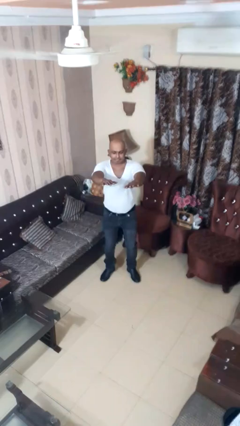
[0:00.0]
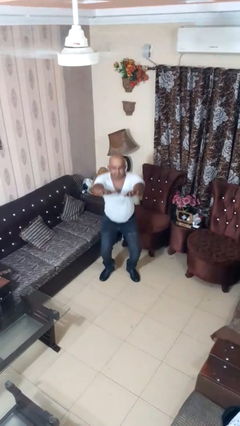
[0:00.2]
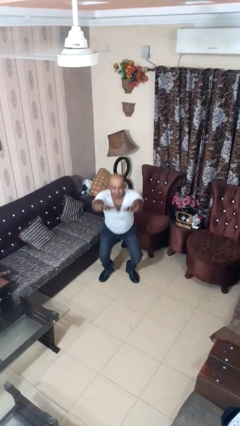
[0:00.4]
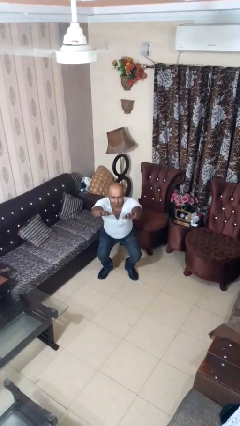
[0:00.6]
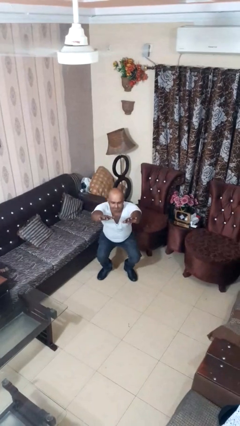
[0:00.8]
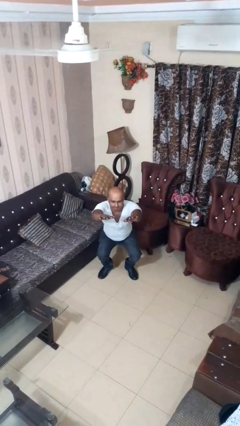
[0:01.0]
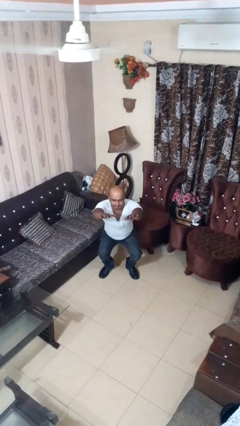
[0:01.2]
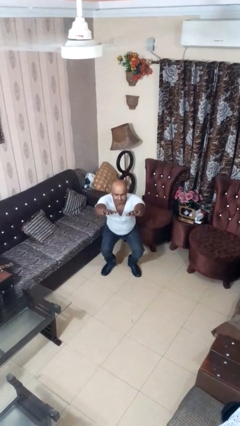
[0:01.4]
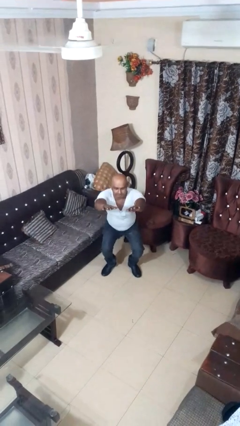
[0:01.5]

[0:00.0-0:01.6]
person squats

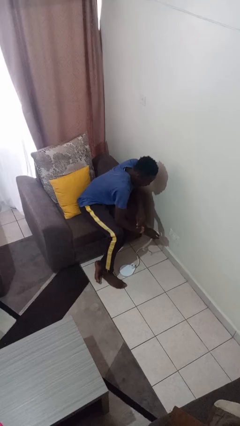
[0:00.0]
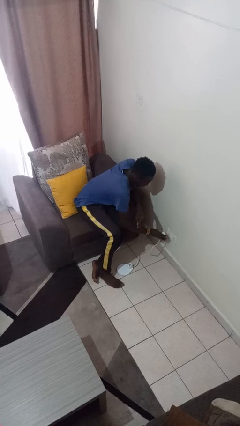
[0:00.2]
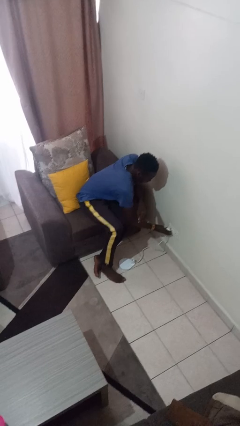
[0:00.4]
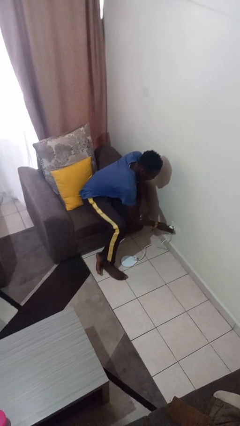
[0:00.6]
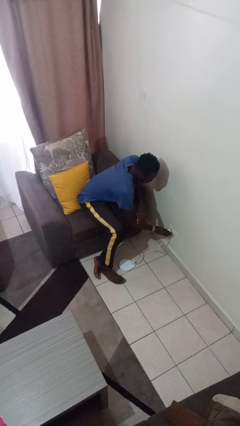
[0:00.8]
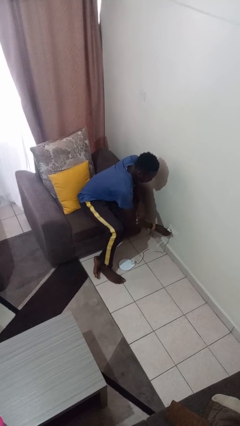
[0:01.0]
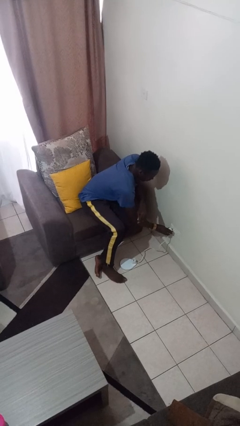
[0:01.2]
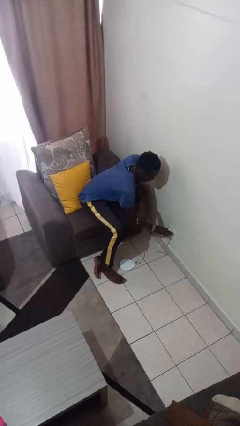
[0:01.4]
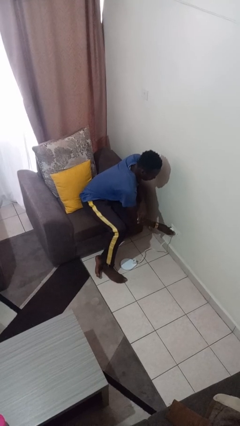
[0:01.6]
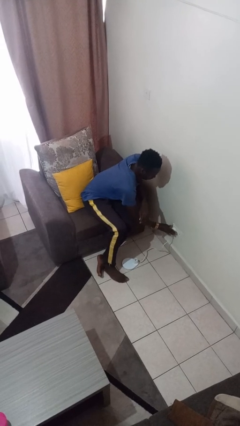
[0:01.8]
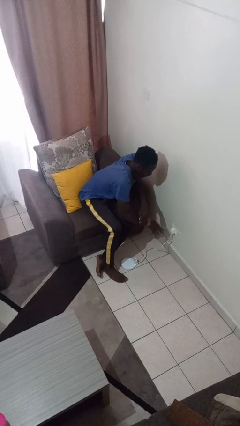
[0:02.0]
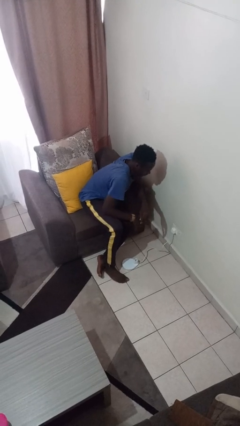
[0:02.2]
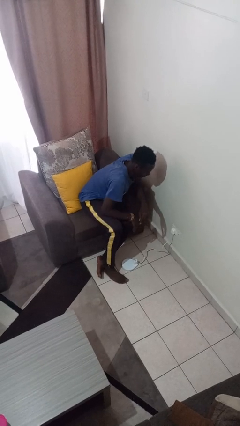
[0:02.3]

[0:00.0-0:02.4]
person plugs into electrical socket

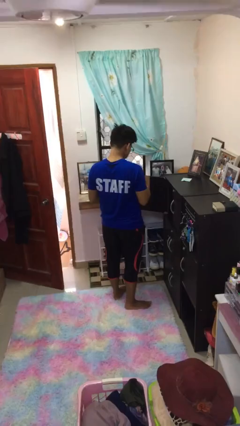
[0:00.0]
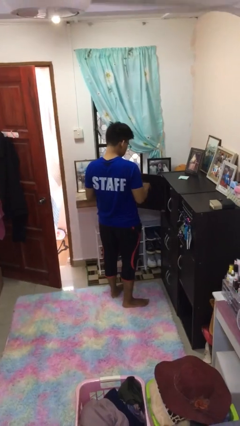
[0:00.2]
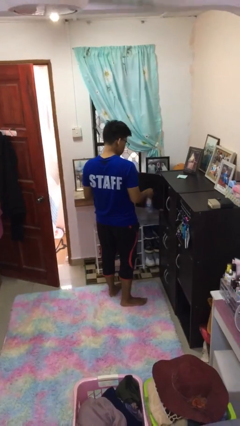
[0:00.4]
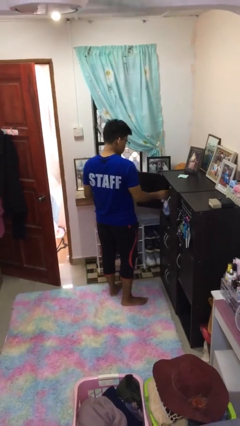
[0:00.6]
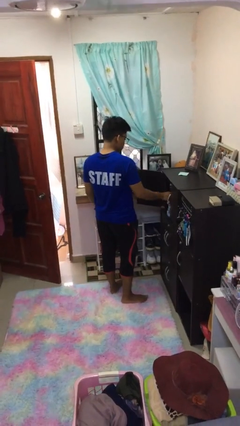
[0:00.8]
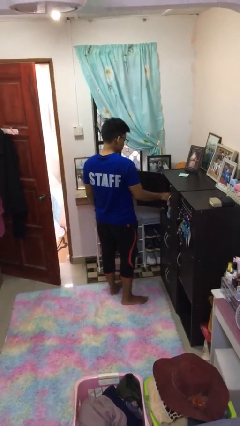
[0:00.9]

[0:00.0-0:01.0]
person puts down object into cabinet

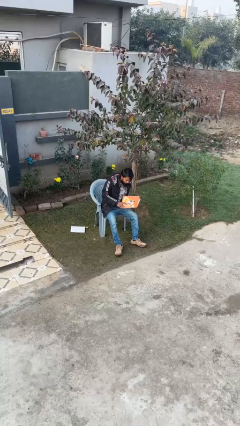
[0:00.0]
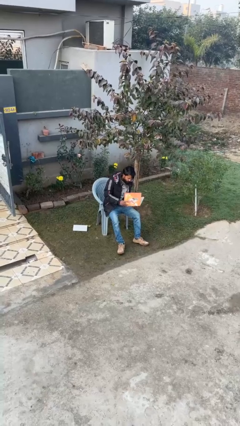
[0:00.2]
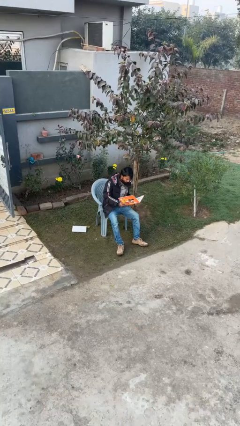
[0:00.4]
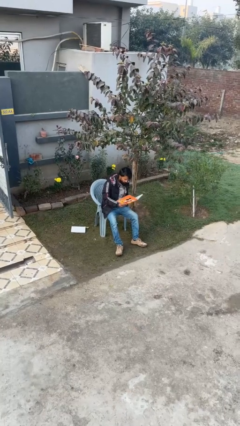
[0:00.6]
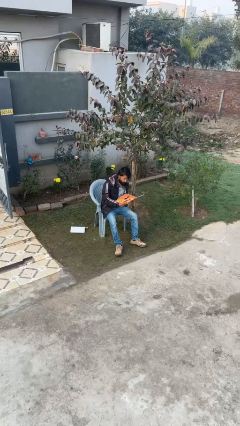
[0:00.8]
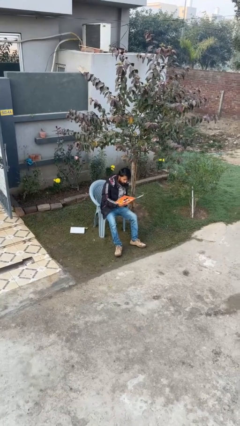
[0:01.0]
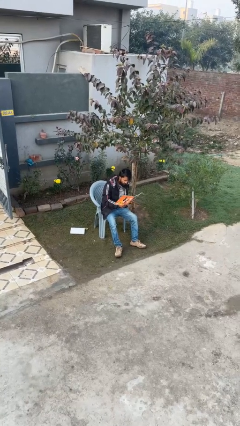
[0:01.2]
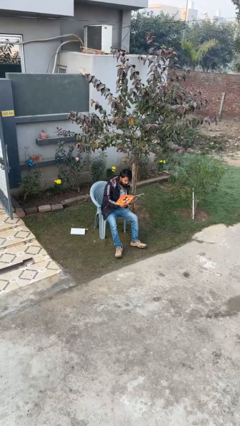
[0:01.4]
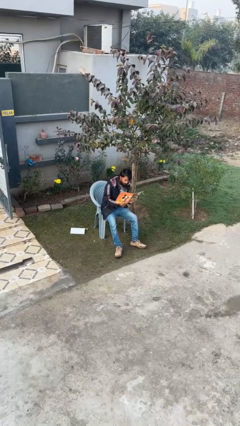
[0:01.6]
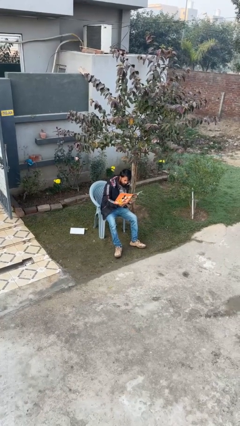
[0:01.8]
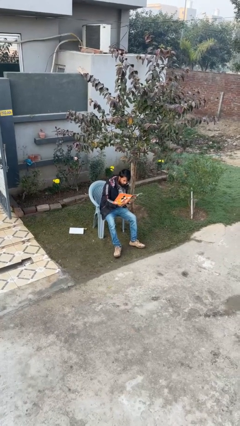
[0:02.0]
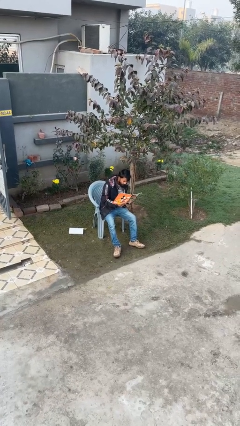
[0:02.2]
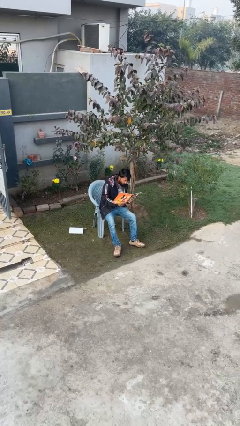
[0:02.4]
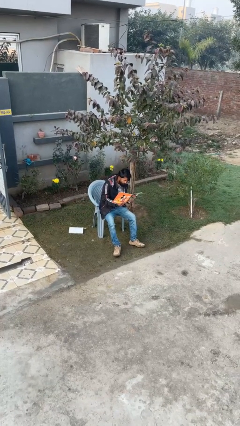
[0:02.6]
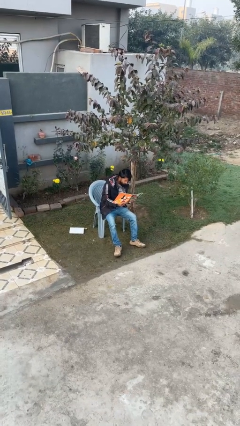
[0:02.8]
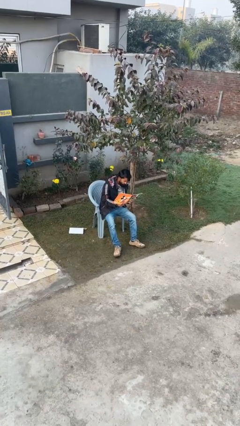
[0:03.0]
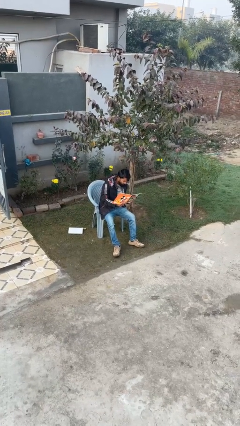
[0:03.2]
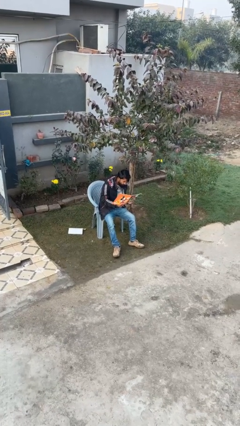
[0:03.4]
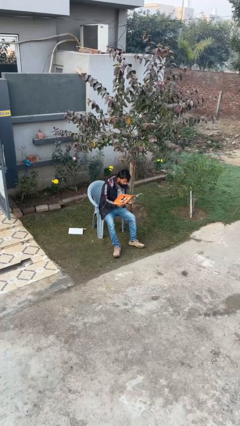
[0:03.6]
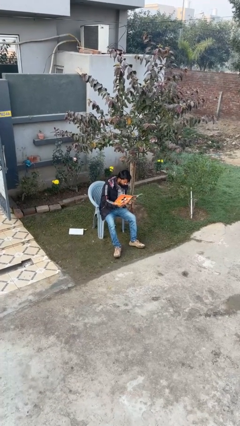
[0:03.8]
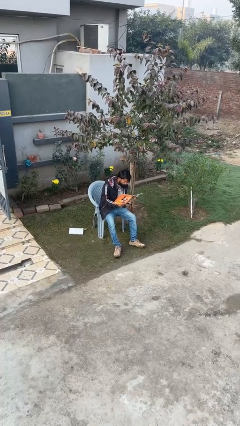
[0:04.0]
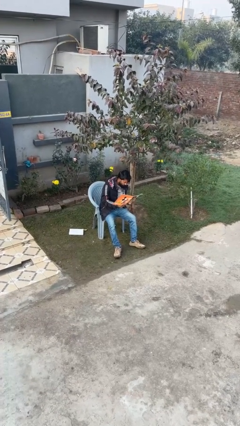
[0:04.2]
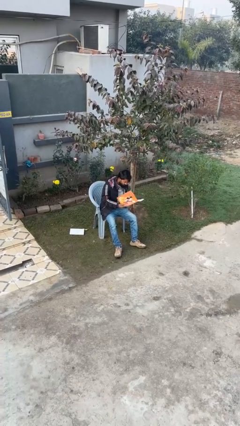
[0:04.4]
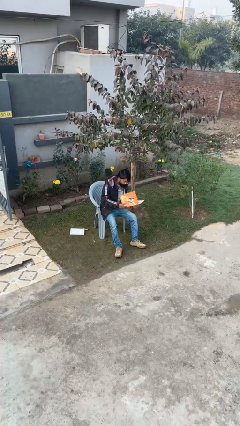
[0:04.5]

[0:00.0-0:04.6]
person reads document

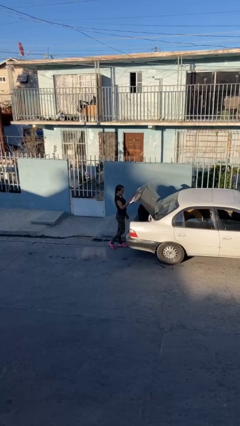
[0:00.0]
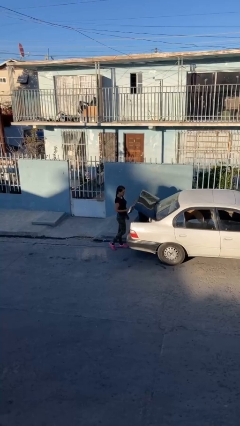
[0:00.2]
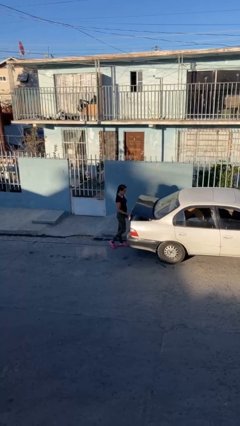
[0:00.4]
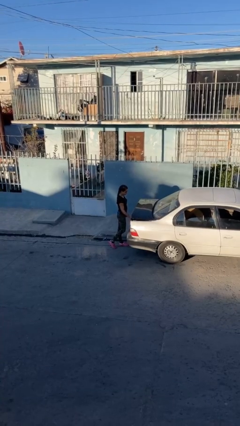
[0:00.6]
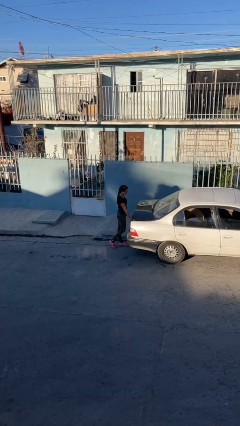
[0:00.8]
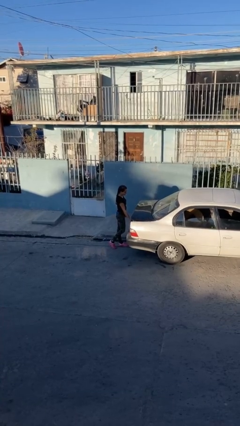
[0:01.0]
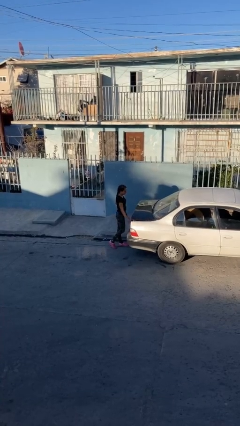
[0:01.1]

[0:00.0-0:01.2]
person closes car trunk

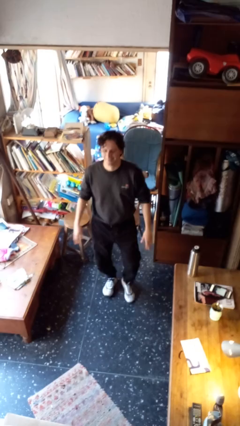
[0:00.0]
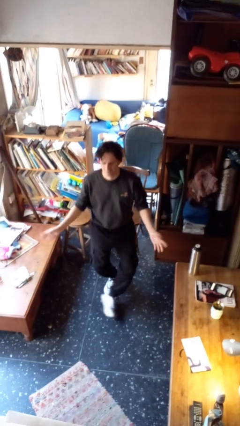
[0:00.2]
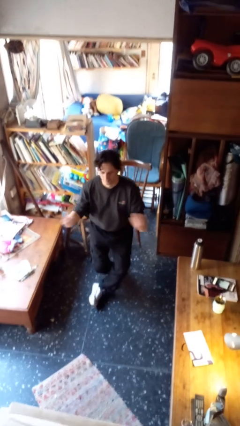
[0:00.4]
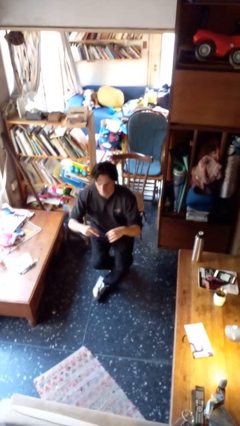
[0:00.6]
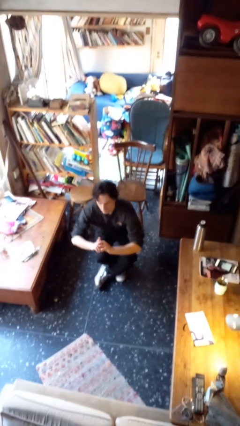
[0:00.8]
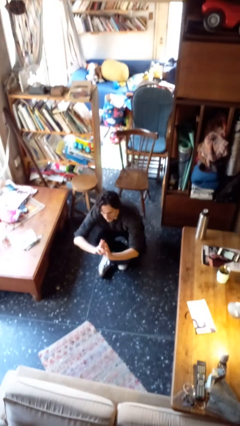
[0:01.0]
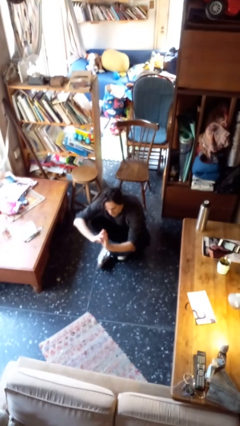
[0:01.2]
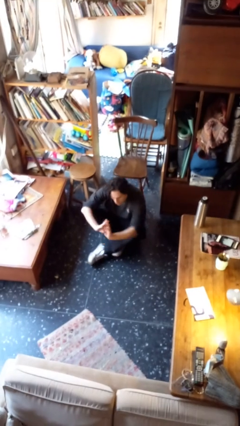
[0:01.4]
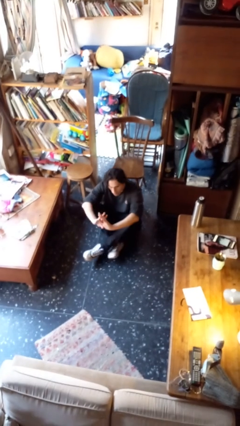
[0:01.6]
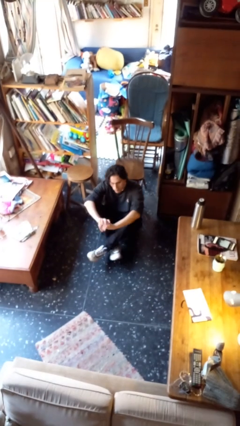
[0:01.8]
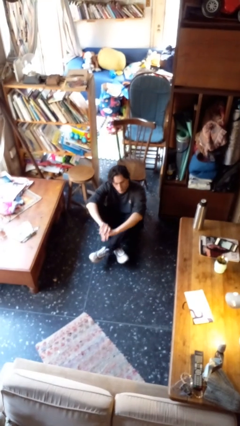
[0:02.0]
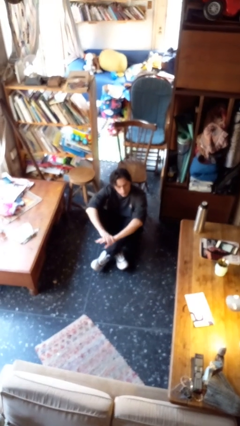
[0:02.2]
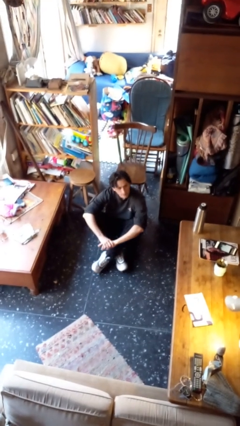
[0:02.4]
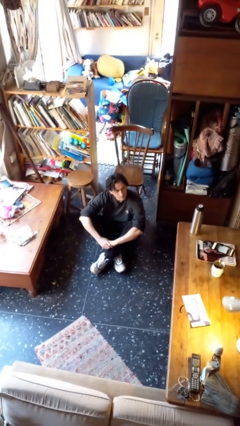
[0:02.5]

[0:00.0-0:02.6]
person sits crisscross

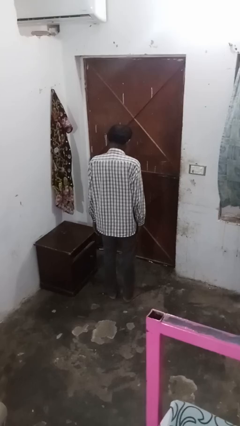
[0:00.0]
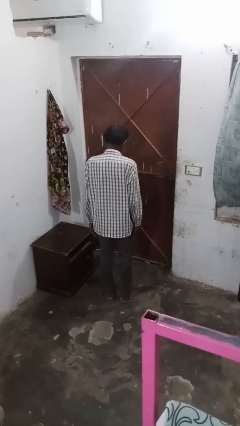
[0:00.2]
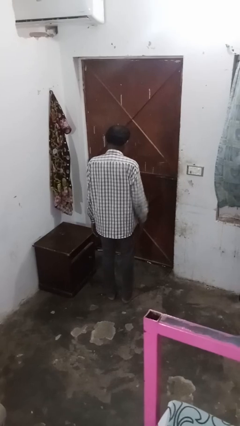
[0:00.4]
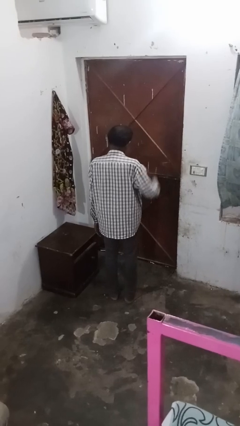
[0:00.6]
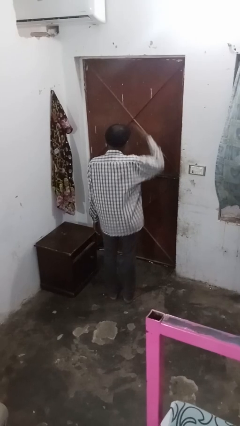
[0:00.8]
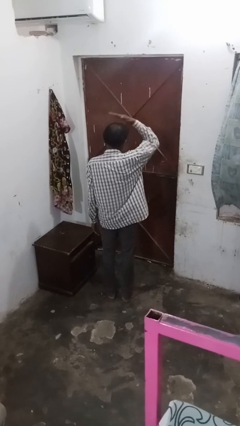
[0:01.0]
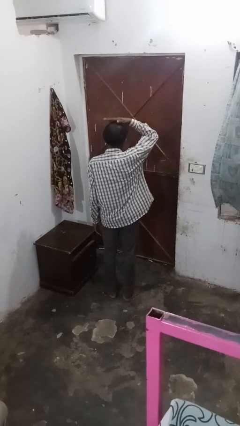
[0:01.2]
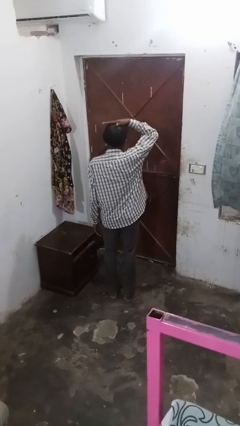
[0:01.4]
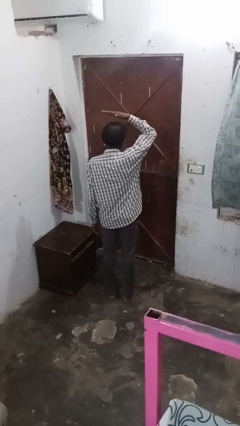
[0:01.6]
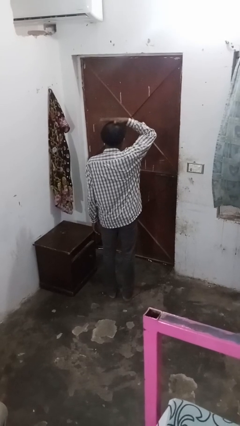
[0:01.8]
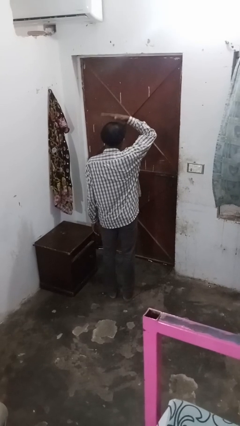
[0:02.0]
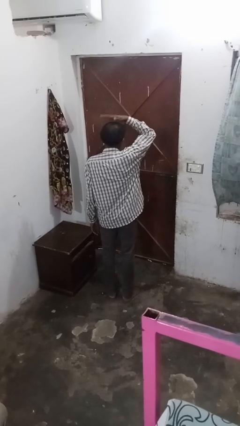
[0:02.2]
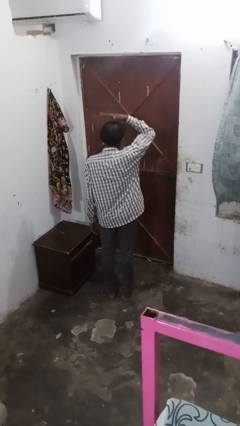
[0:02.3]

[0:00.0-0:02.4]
person pats head

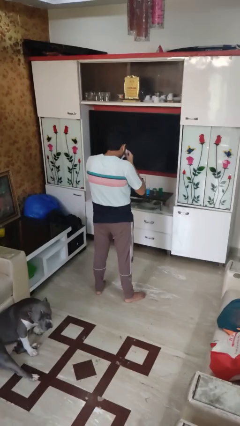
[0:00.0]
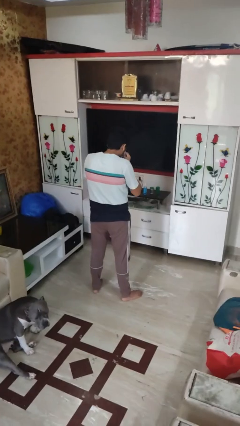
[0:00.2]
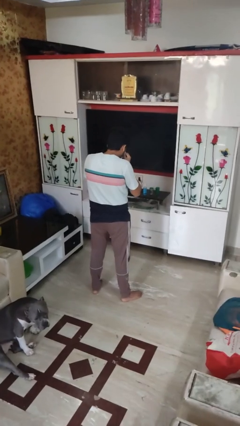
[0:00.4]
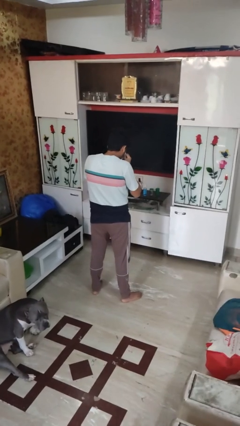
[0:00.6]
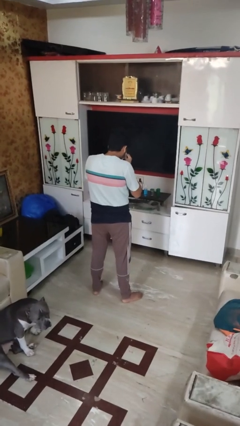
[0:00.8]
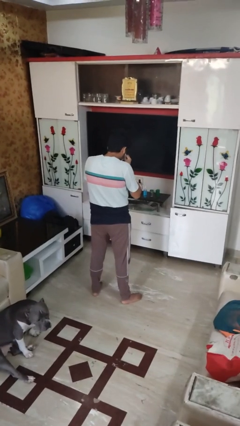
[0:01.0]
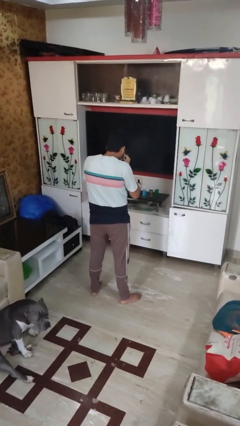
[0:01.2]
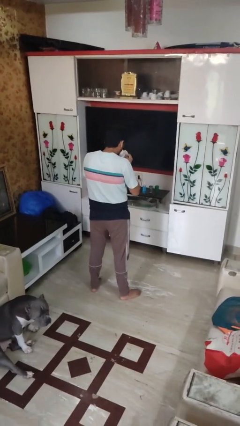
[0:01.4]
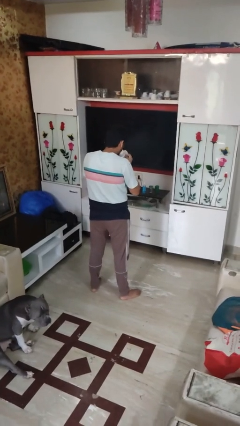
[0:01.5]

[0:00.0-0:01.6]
person blows nose
